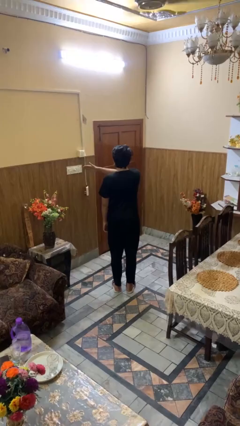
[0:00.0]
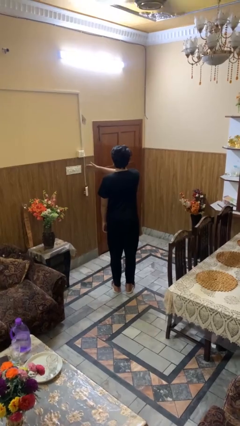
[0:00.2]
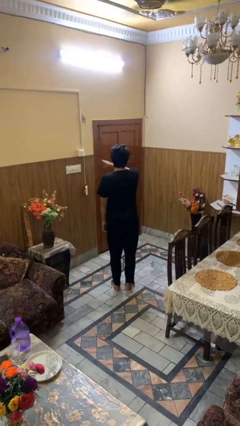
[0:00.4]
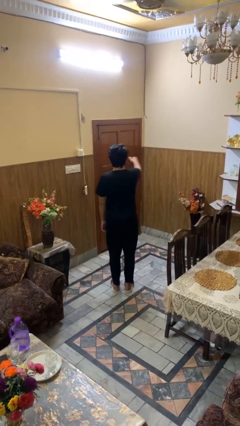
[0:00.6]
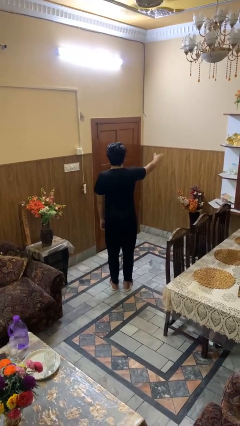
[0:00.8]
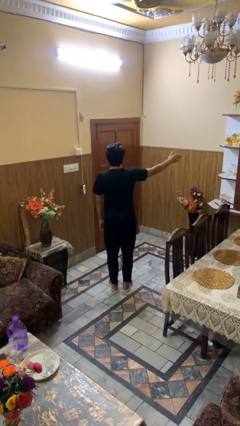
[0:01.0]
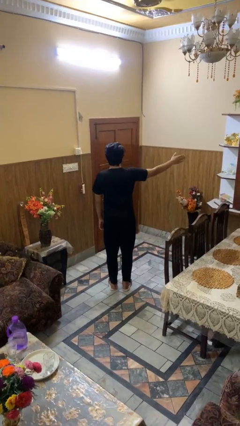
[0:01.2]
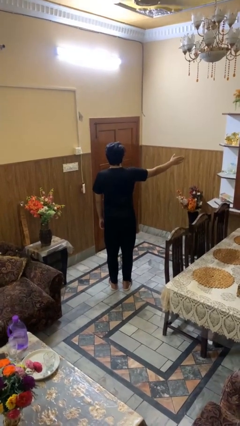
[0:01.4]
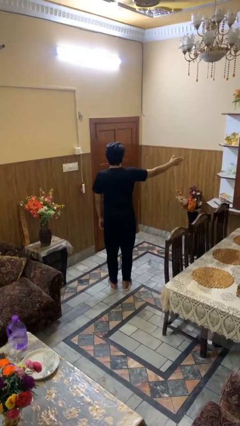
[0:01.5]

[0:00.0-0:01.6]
person gestures swipe right

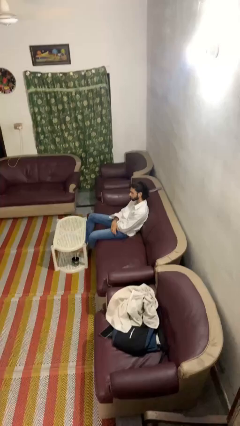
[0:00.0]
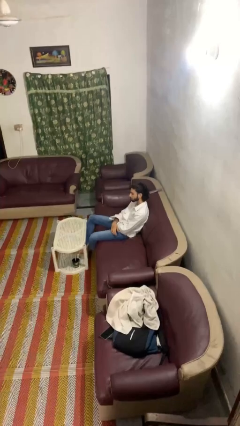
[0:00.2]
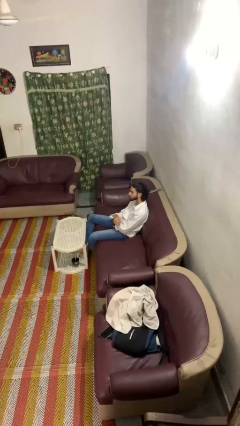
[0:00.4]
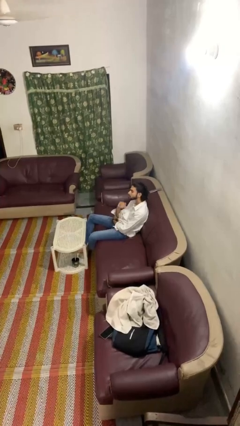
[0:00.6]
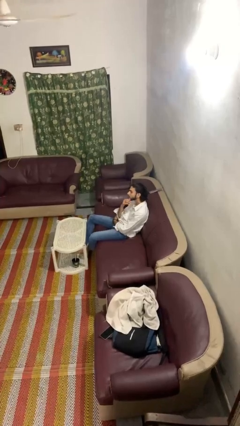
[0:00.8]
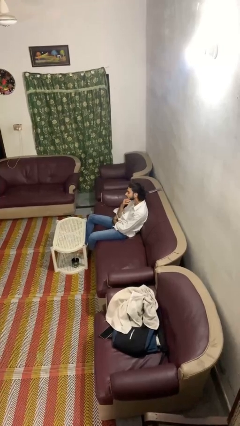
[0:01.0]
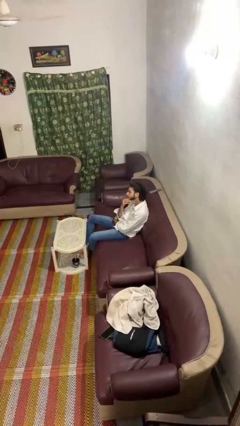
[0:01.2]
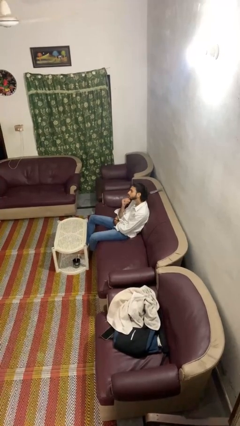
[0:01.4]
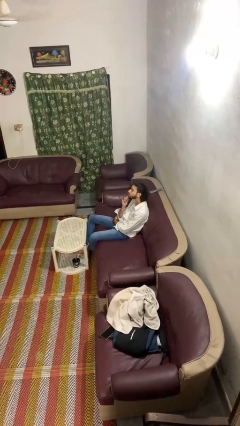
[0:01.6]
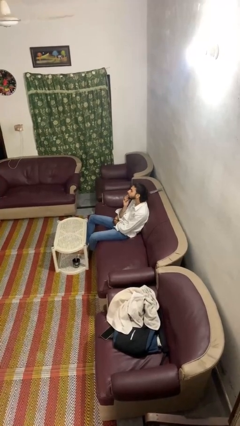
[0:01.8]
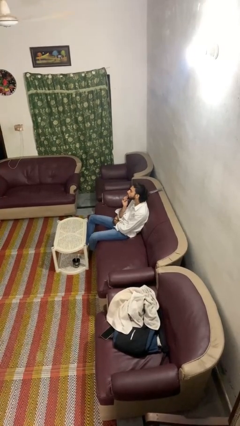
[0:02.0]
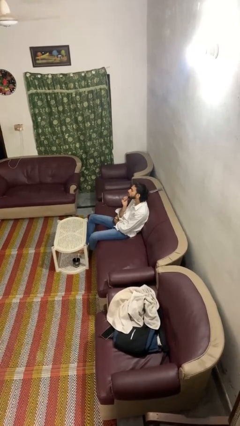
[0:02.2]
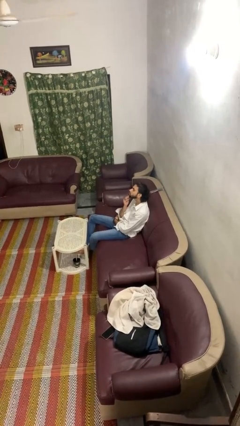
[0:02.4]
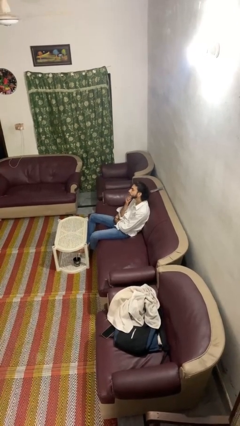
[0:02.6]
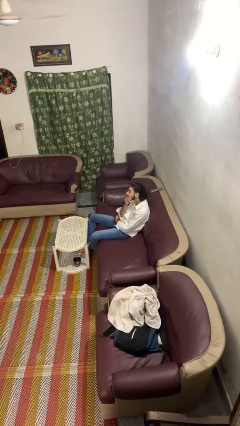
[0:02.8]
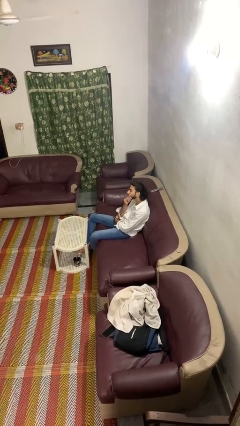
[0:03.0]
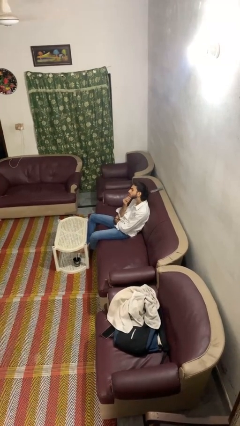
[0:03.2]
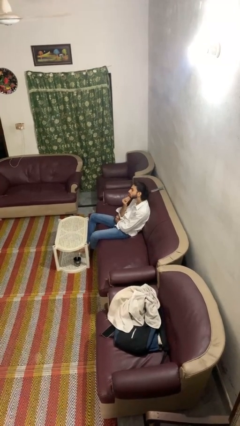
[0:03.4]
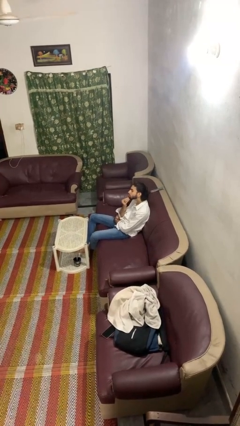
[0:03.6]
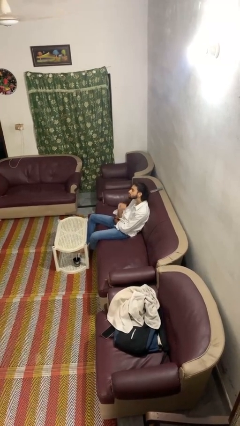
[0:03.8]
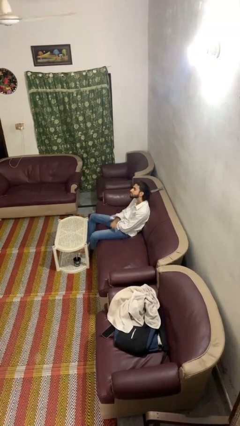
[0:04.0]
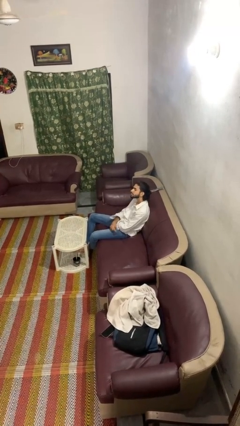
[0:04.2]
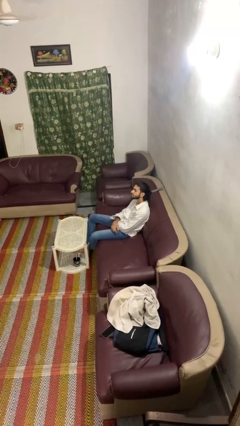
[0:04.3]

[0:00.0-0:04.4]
person strokes chin

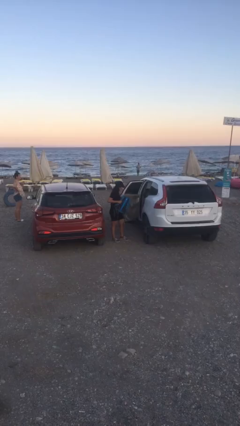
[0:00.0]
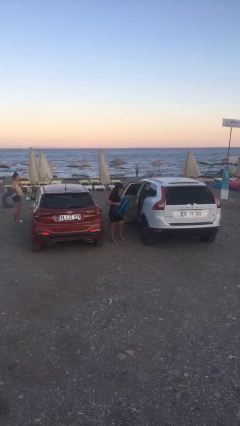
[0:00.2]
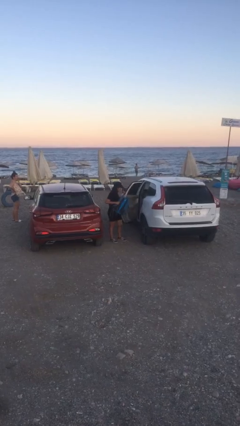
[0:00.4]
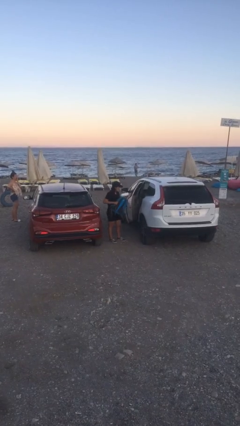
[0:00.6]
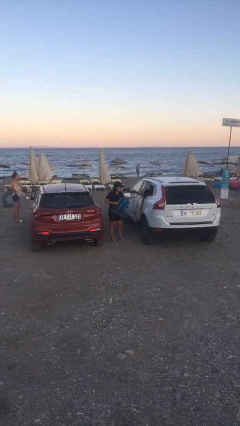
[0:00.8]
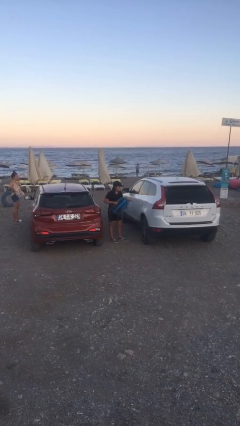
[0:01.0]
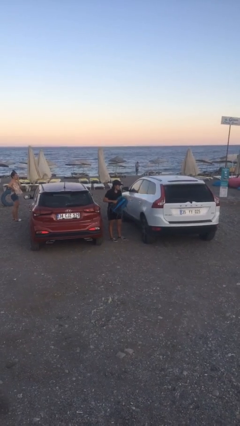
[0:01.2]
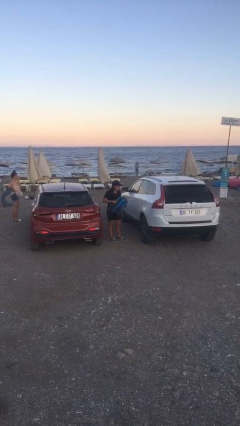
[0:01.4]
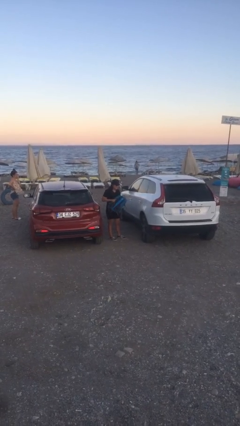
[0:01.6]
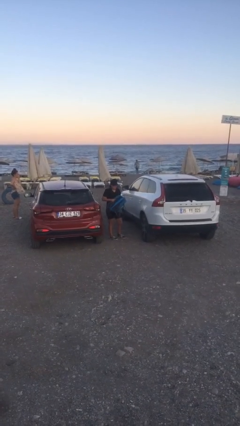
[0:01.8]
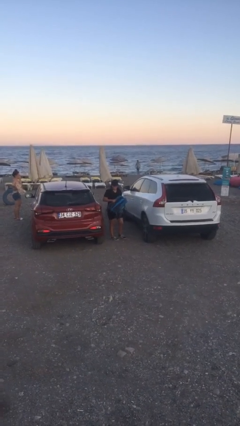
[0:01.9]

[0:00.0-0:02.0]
person closes car door

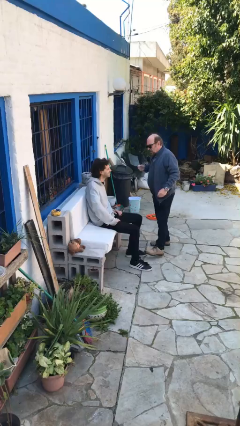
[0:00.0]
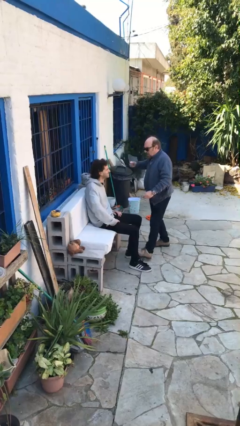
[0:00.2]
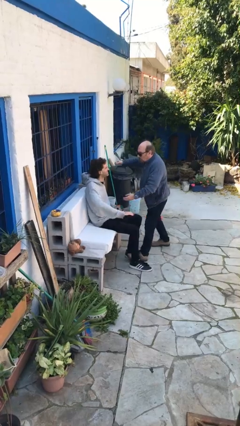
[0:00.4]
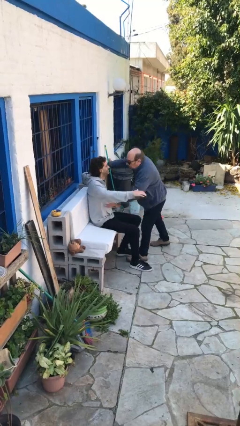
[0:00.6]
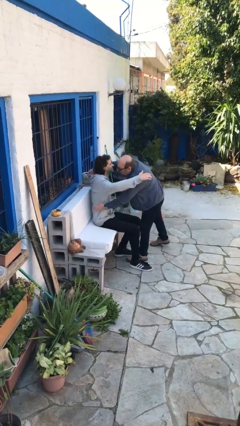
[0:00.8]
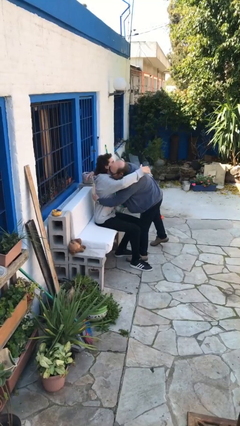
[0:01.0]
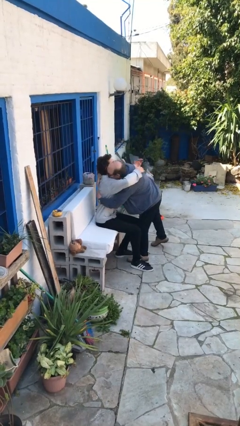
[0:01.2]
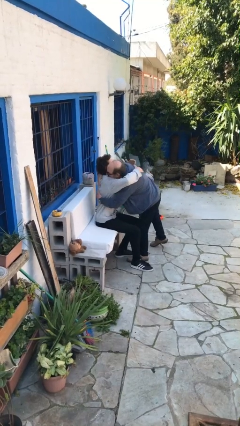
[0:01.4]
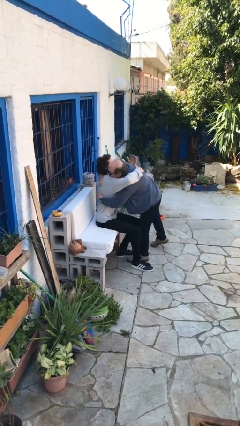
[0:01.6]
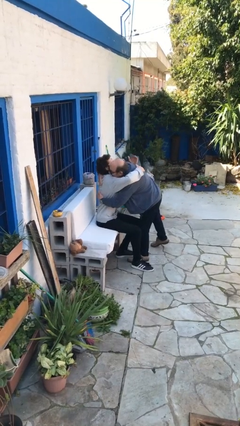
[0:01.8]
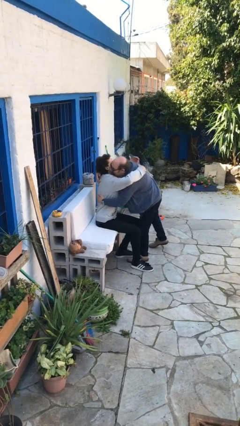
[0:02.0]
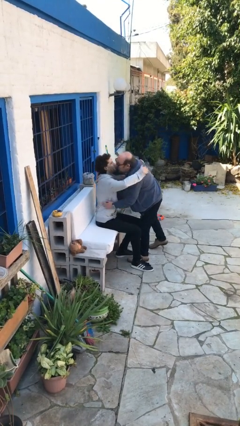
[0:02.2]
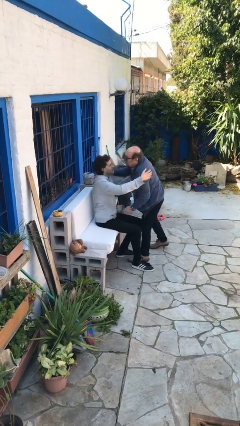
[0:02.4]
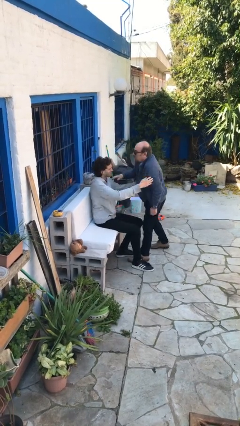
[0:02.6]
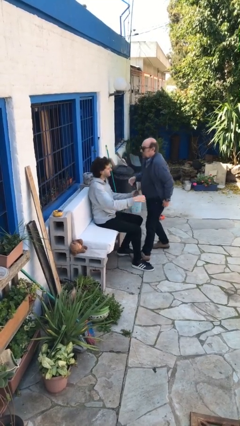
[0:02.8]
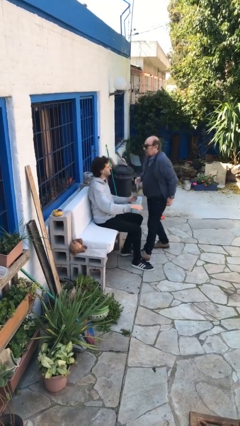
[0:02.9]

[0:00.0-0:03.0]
person embraces person

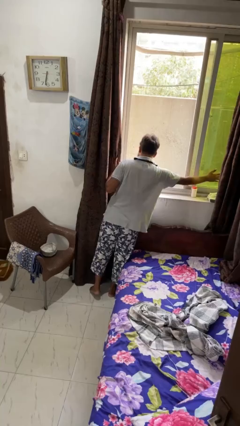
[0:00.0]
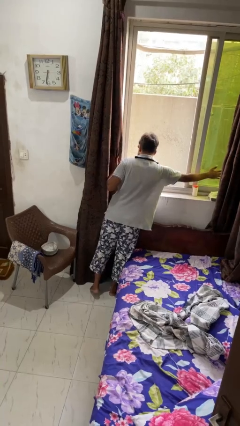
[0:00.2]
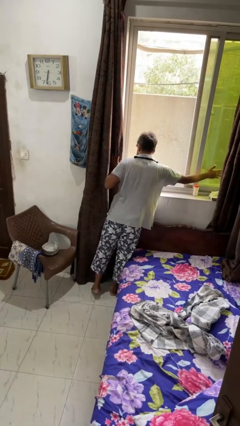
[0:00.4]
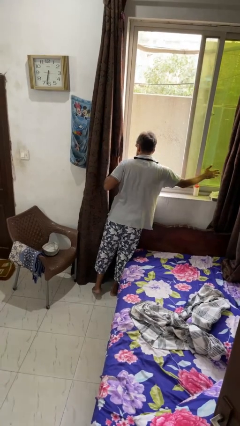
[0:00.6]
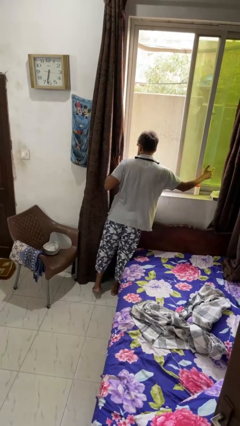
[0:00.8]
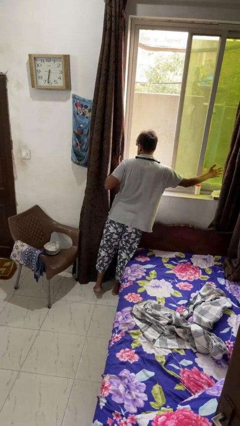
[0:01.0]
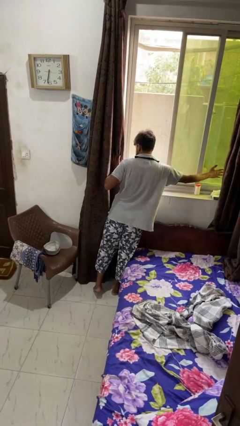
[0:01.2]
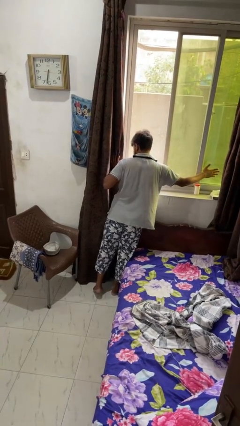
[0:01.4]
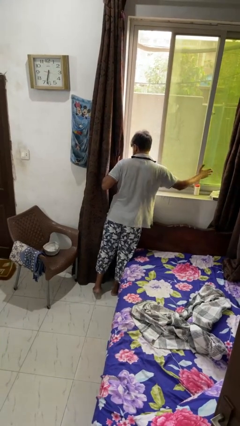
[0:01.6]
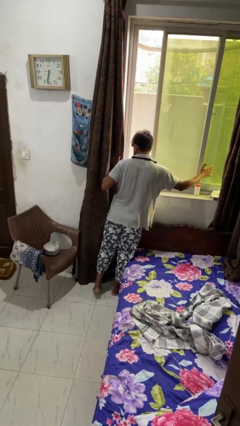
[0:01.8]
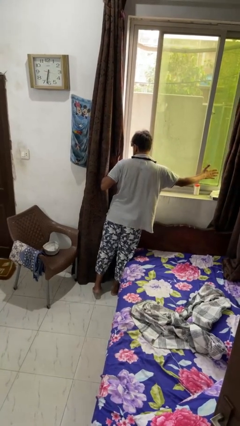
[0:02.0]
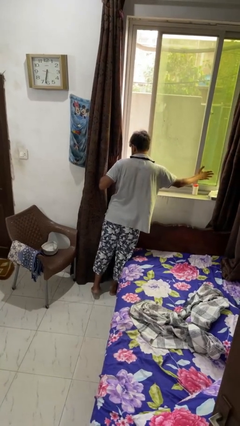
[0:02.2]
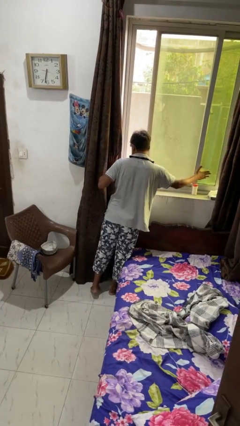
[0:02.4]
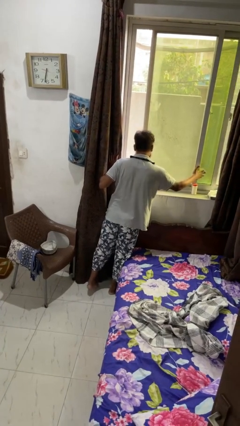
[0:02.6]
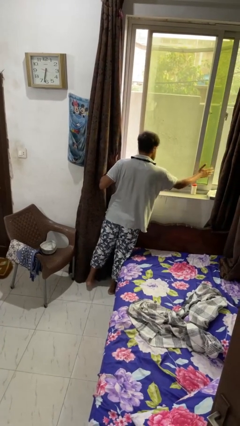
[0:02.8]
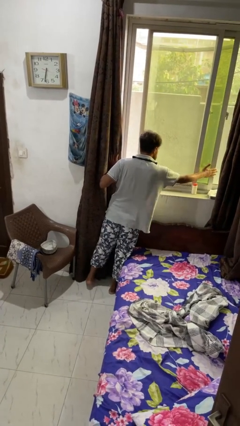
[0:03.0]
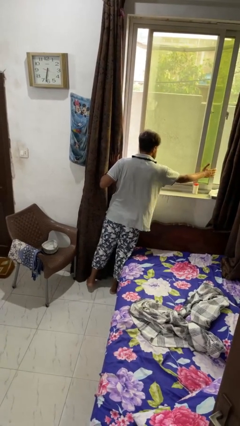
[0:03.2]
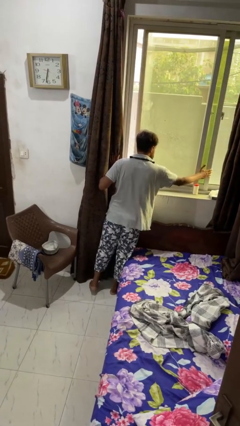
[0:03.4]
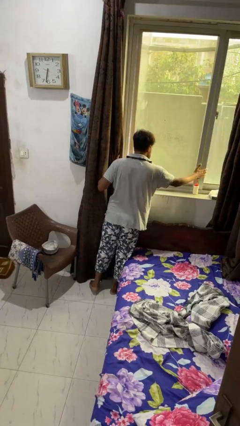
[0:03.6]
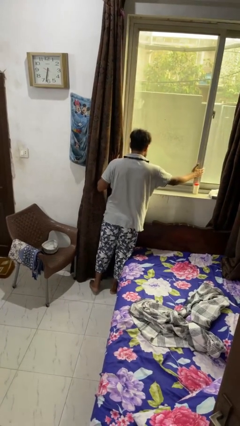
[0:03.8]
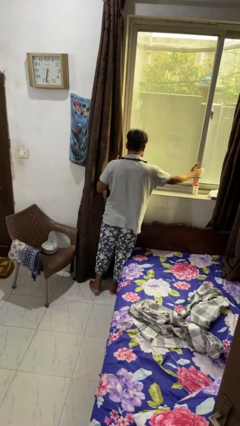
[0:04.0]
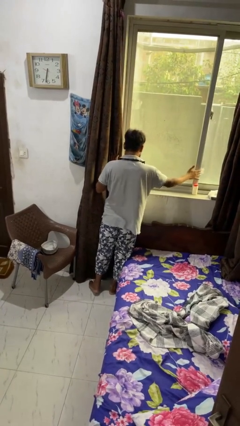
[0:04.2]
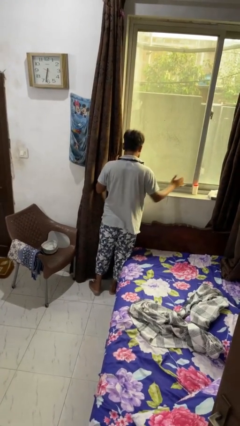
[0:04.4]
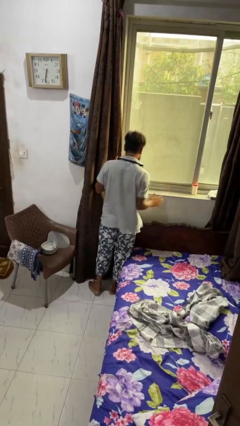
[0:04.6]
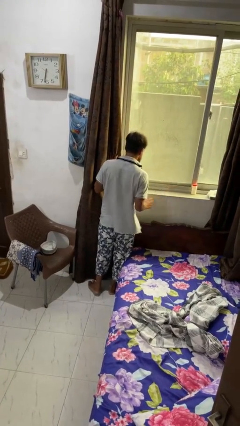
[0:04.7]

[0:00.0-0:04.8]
person closes home window

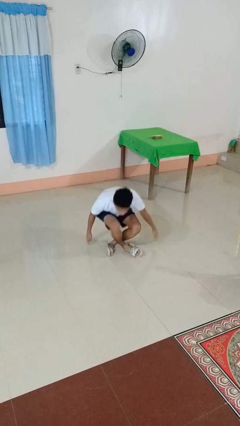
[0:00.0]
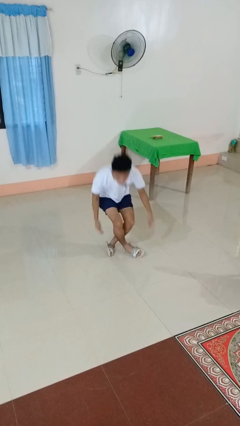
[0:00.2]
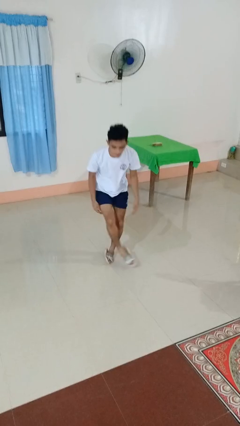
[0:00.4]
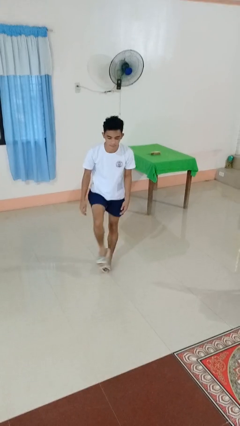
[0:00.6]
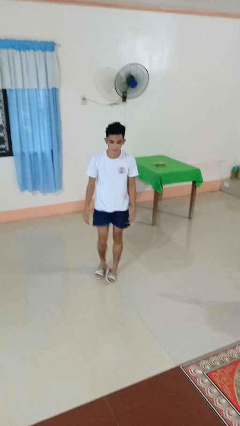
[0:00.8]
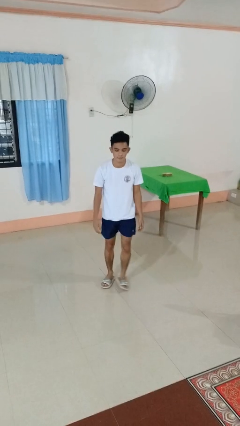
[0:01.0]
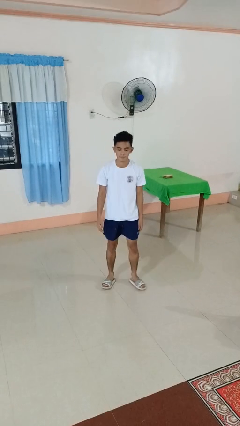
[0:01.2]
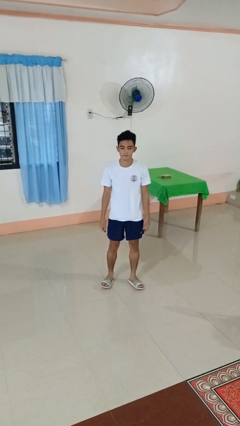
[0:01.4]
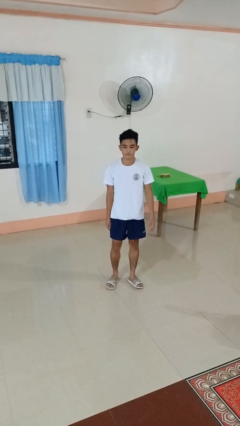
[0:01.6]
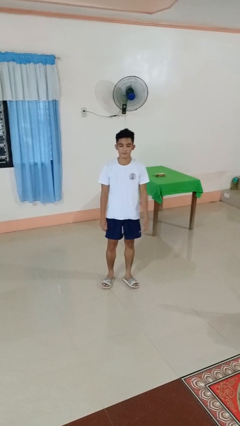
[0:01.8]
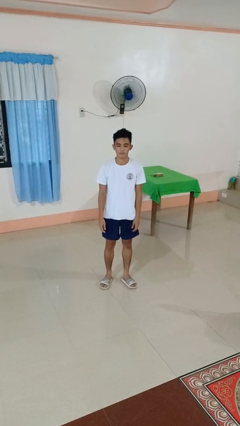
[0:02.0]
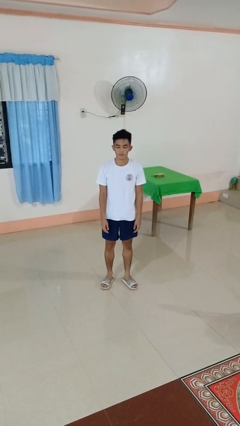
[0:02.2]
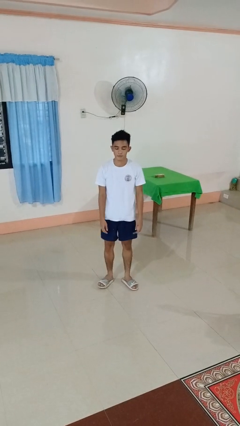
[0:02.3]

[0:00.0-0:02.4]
person stands up from floor
